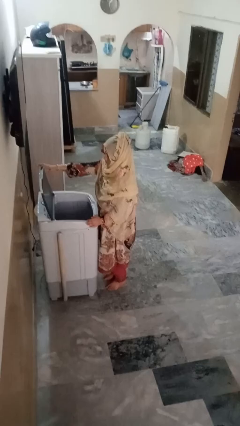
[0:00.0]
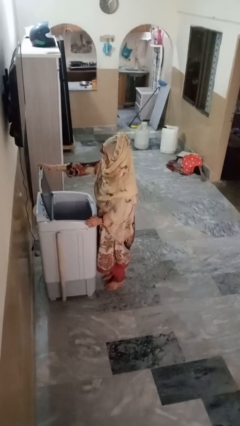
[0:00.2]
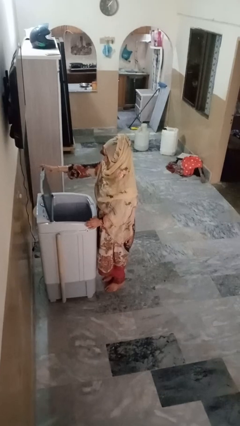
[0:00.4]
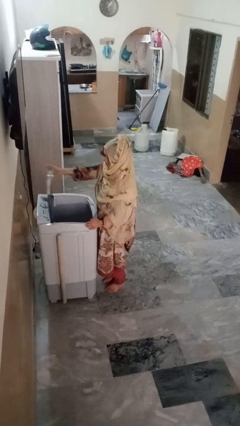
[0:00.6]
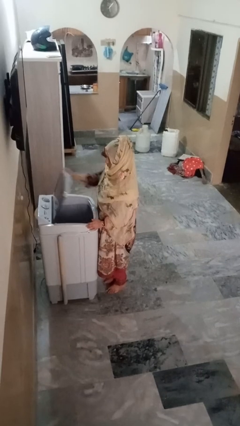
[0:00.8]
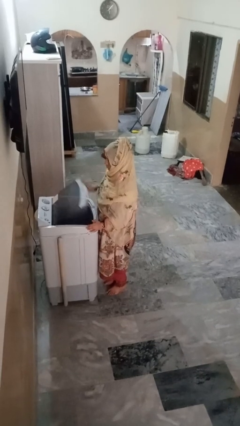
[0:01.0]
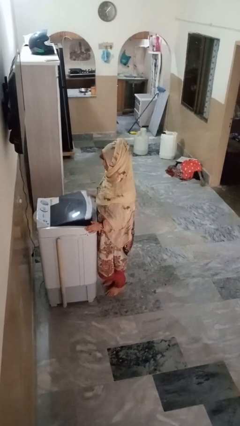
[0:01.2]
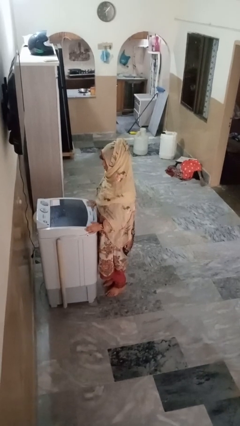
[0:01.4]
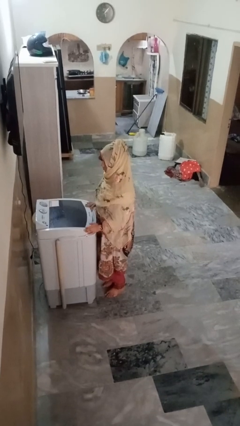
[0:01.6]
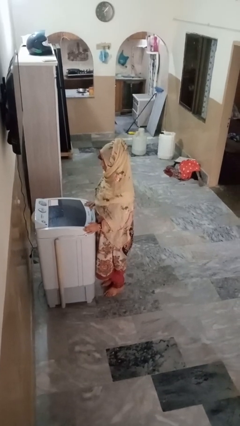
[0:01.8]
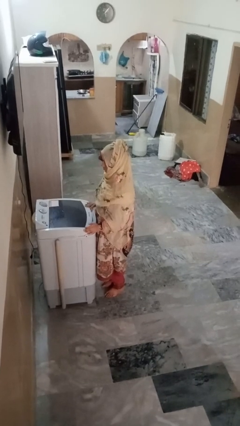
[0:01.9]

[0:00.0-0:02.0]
person closes clothes washer

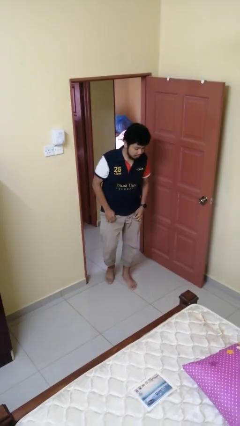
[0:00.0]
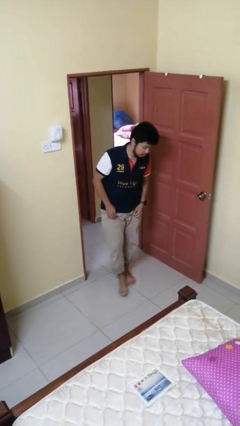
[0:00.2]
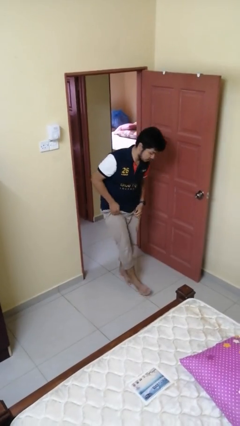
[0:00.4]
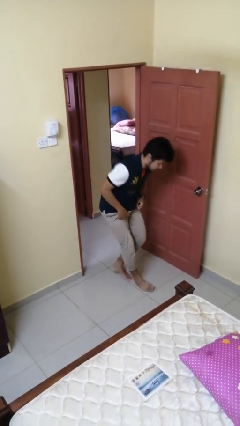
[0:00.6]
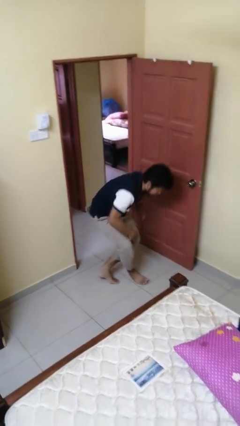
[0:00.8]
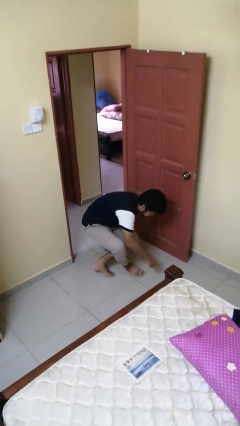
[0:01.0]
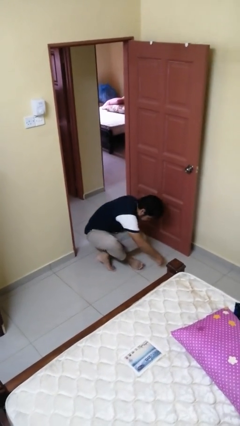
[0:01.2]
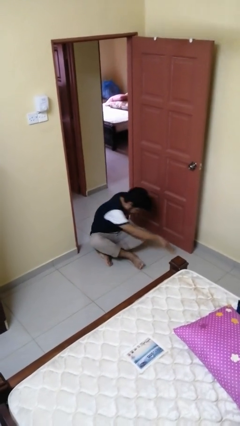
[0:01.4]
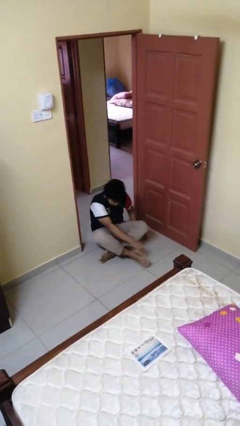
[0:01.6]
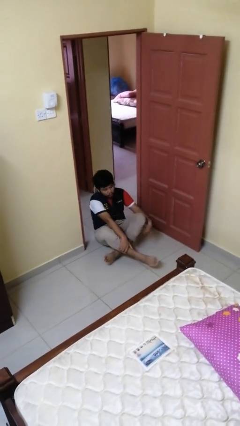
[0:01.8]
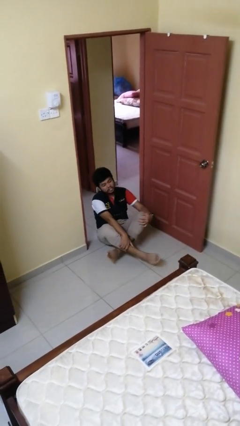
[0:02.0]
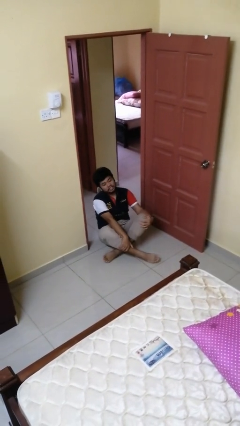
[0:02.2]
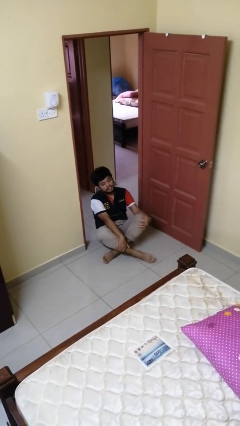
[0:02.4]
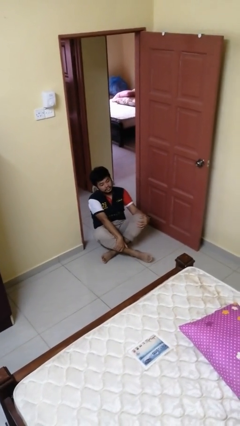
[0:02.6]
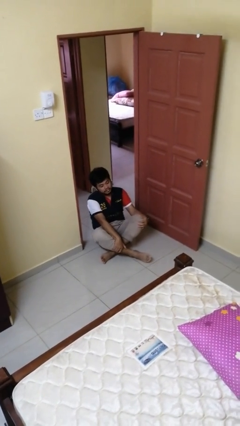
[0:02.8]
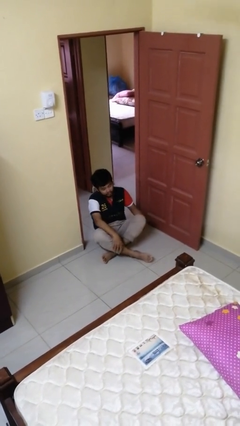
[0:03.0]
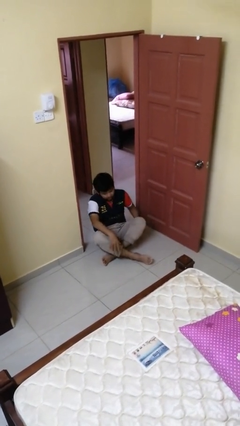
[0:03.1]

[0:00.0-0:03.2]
person sits crisscross

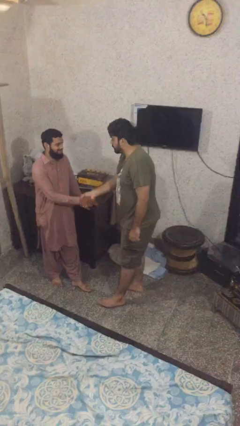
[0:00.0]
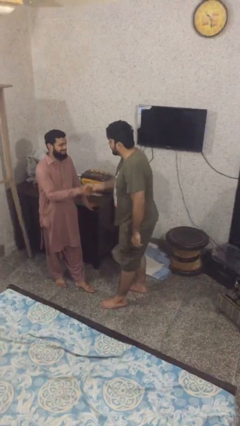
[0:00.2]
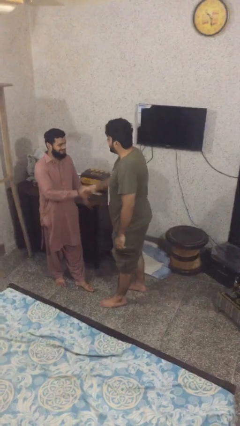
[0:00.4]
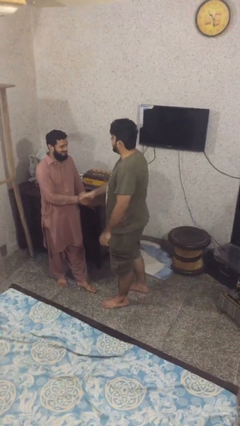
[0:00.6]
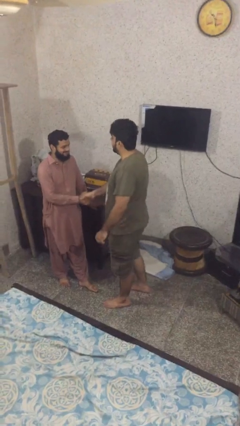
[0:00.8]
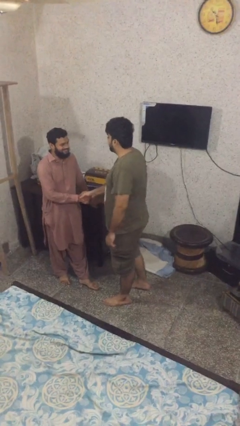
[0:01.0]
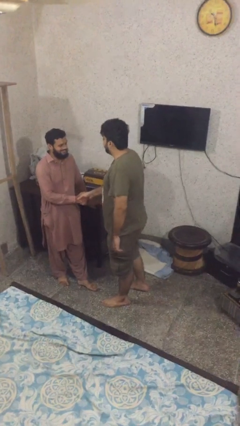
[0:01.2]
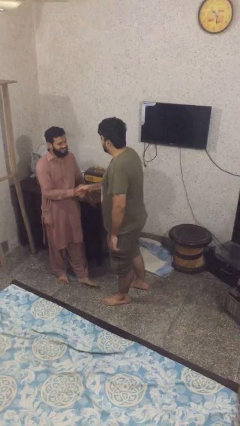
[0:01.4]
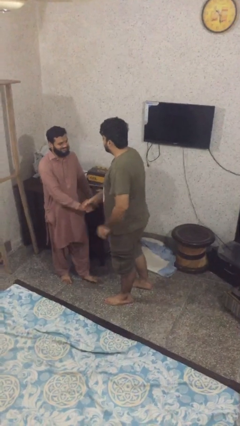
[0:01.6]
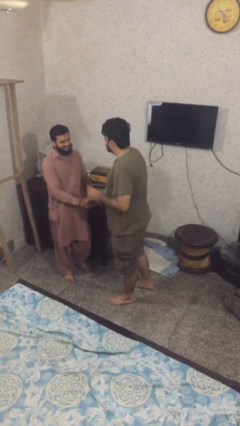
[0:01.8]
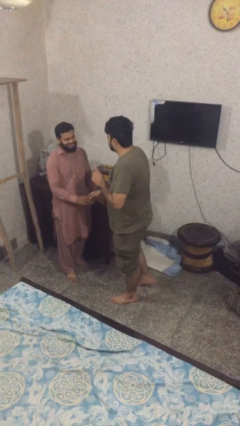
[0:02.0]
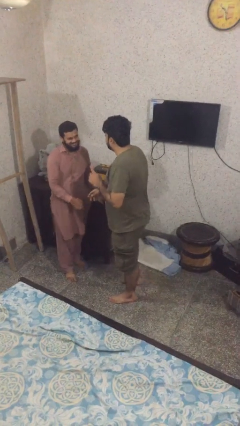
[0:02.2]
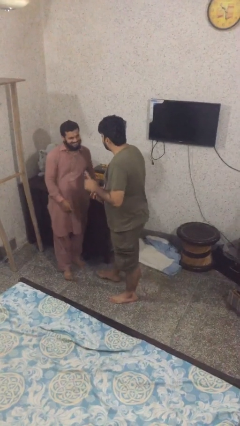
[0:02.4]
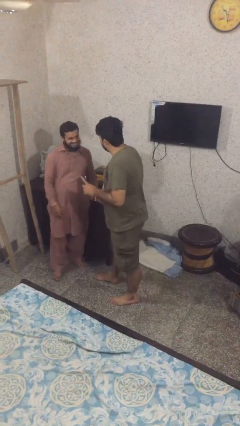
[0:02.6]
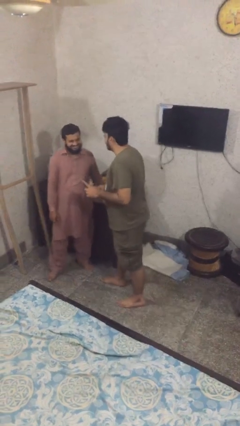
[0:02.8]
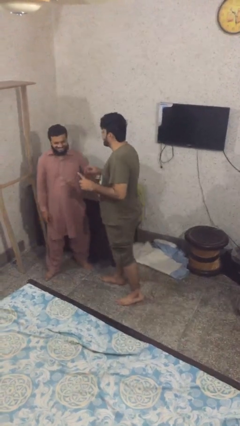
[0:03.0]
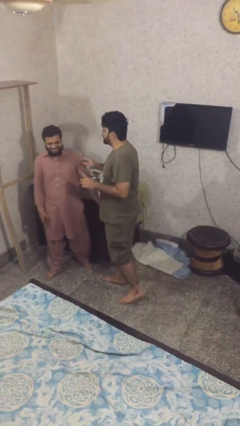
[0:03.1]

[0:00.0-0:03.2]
person shakes hand

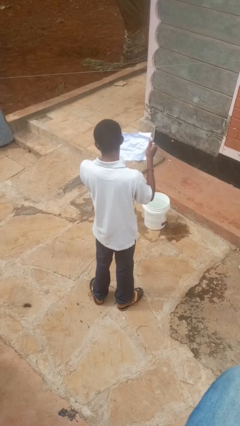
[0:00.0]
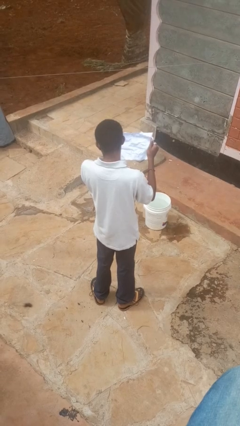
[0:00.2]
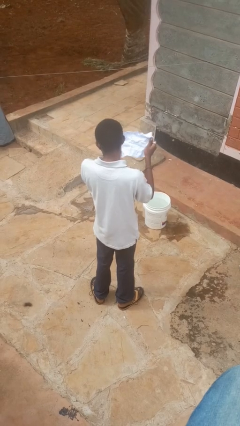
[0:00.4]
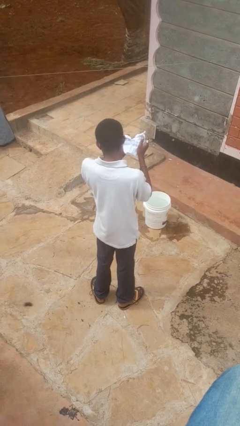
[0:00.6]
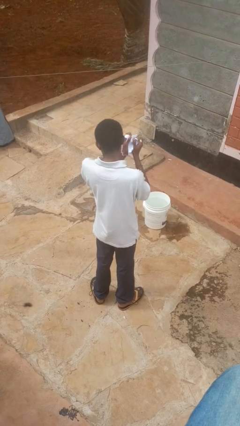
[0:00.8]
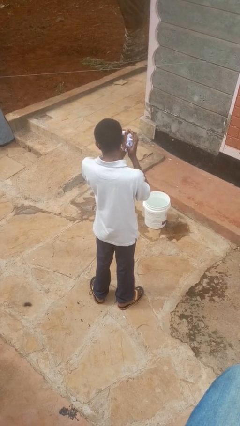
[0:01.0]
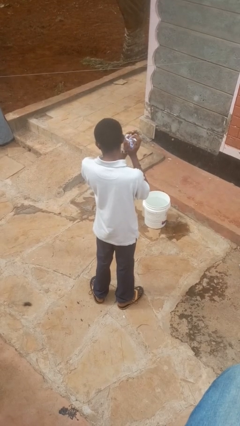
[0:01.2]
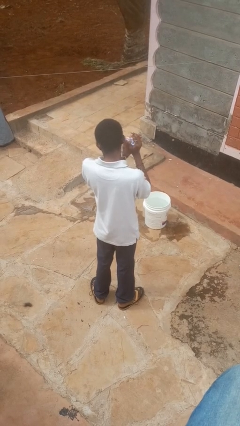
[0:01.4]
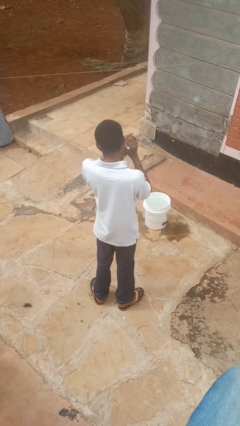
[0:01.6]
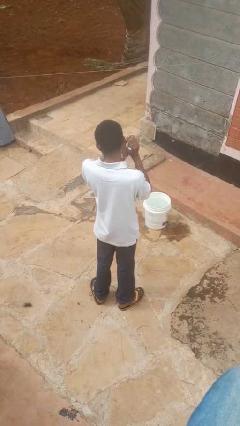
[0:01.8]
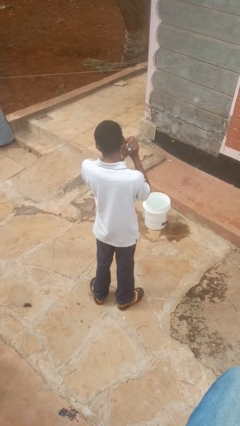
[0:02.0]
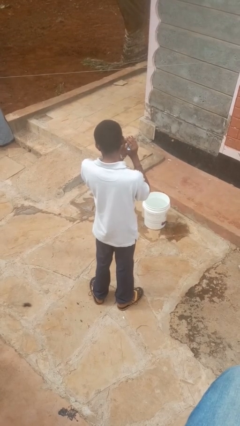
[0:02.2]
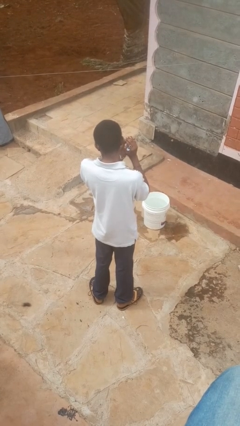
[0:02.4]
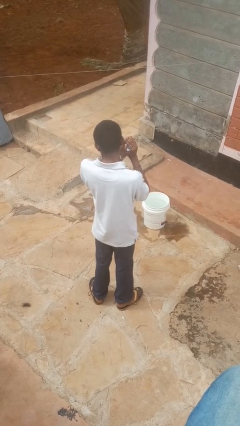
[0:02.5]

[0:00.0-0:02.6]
person crumples paper

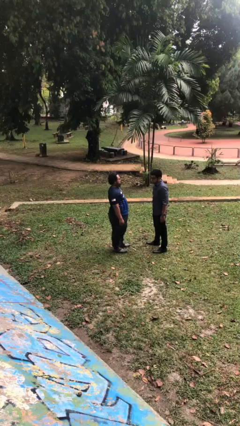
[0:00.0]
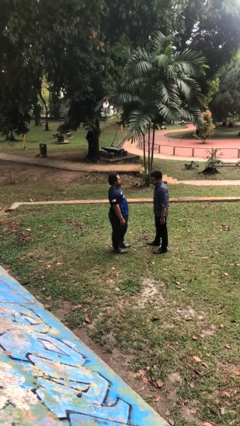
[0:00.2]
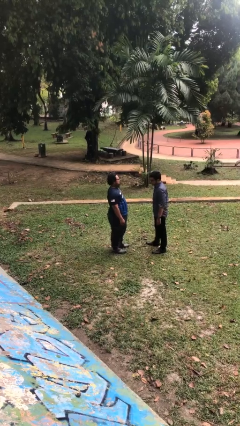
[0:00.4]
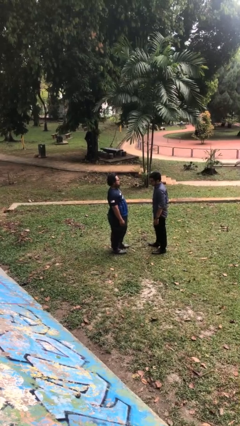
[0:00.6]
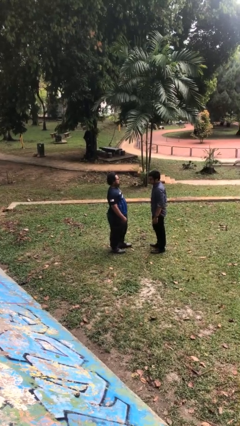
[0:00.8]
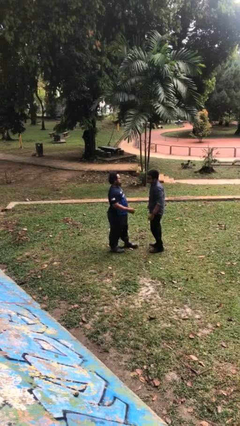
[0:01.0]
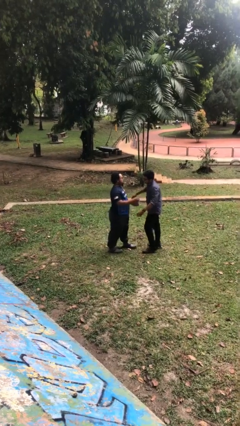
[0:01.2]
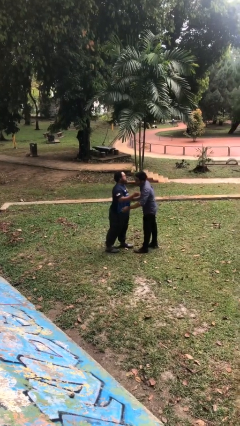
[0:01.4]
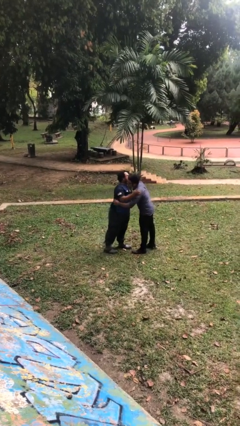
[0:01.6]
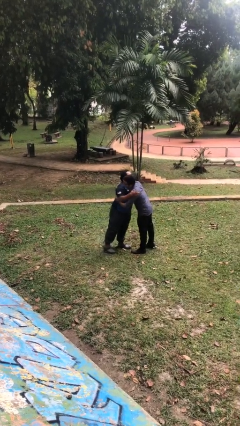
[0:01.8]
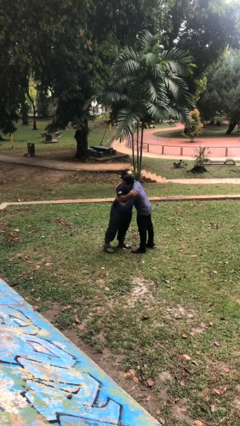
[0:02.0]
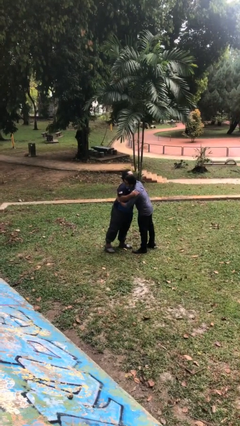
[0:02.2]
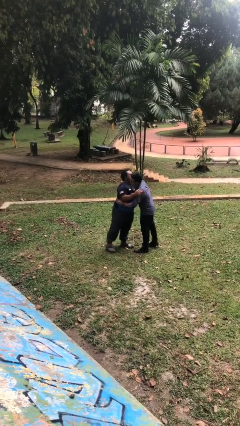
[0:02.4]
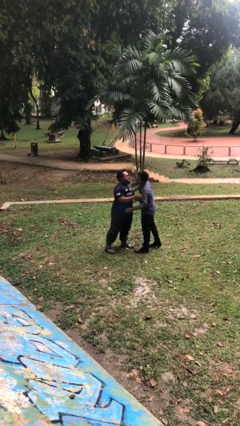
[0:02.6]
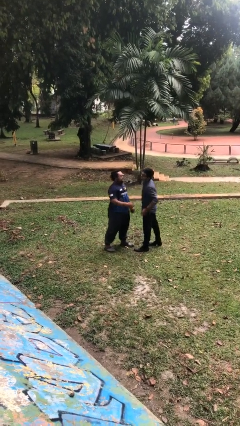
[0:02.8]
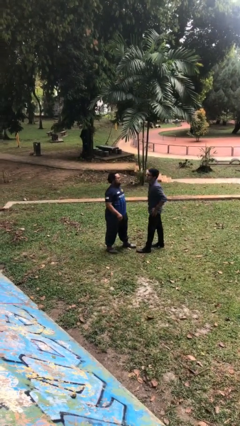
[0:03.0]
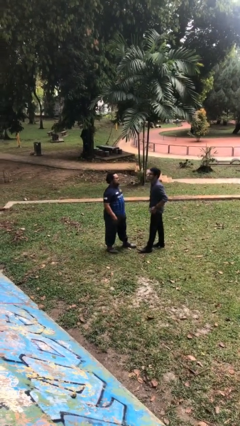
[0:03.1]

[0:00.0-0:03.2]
person embraces person

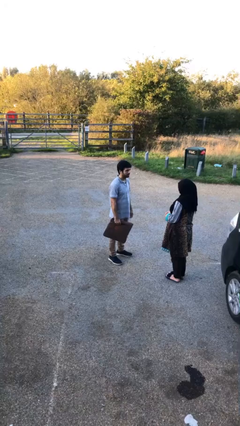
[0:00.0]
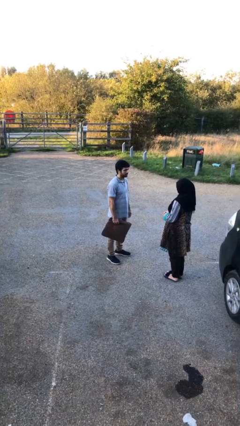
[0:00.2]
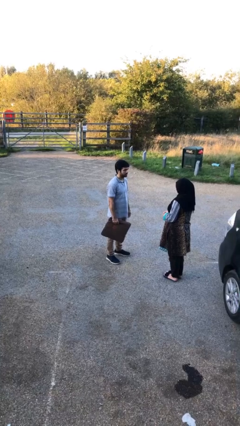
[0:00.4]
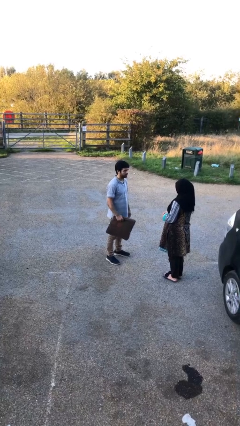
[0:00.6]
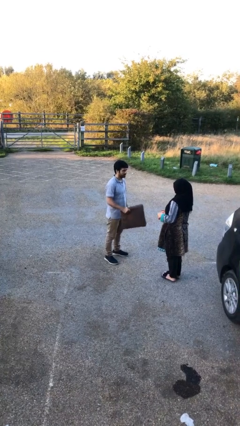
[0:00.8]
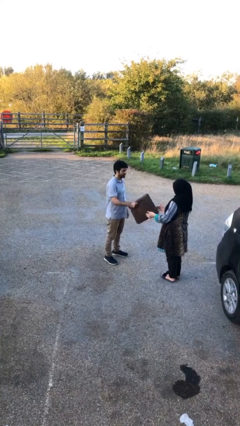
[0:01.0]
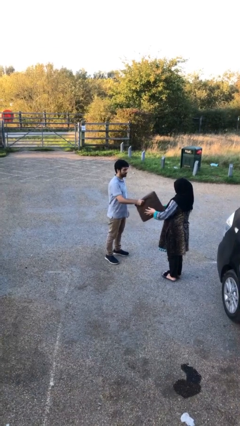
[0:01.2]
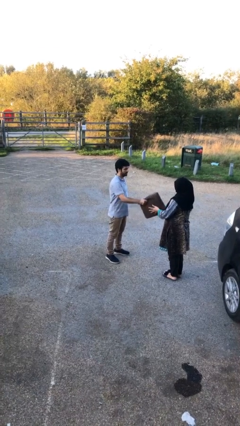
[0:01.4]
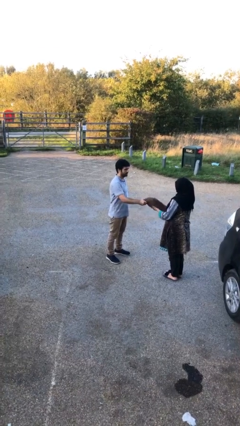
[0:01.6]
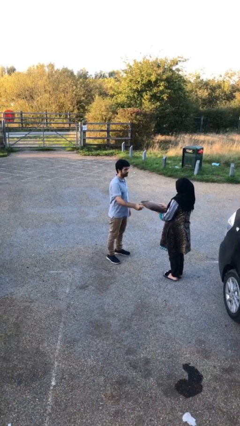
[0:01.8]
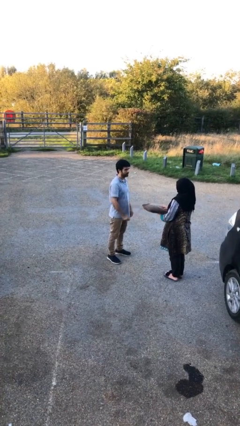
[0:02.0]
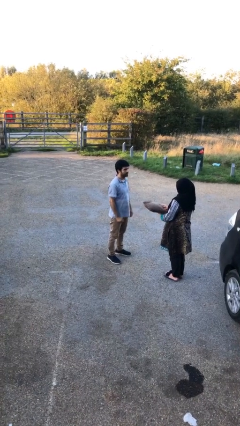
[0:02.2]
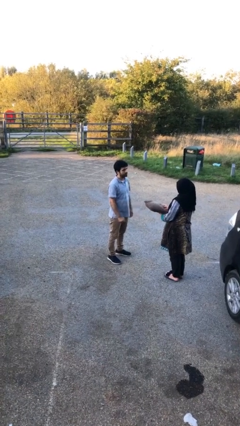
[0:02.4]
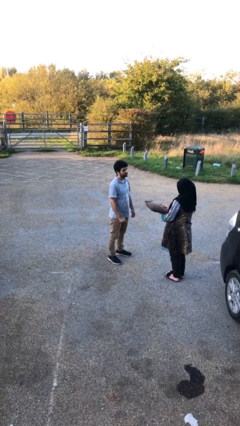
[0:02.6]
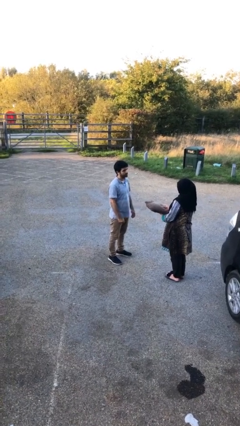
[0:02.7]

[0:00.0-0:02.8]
person transfers object to person

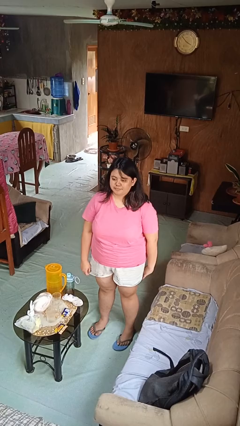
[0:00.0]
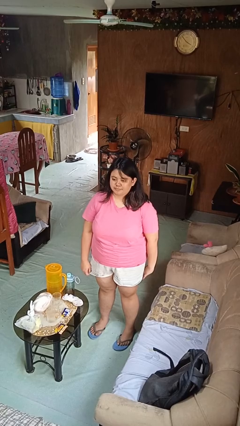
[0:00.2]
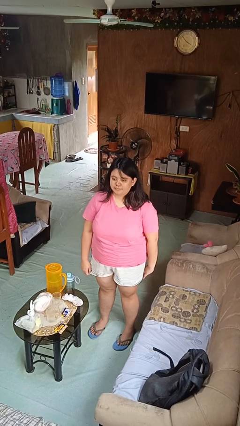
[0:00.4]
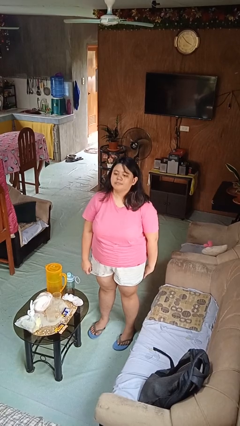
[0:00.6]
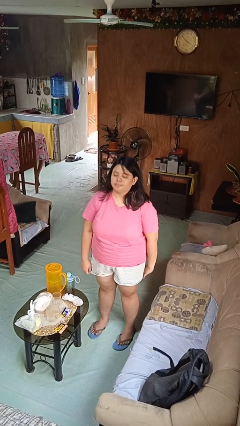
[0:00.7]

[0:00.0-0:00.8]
person nods head
